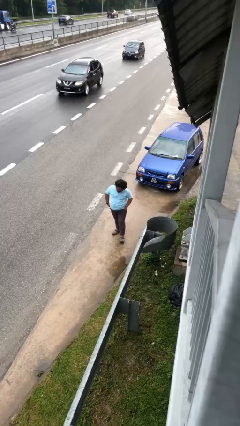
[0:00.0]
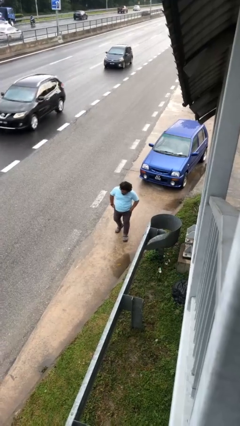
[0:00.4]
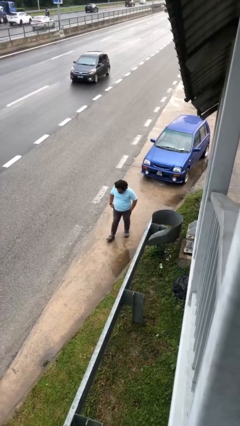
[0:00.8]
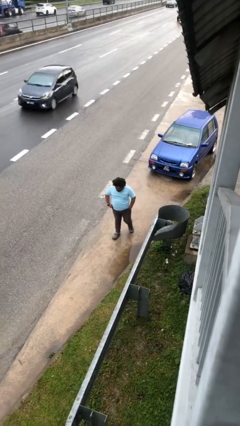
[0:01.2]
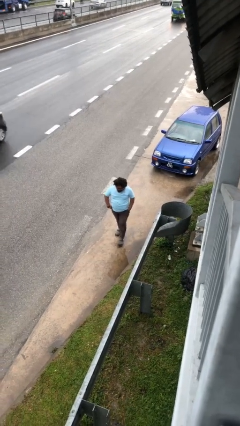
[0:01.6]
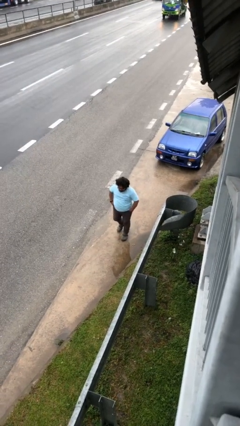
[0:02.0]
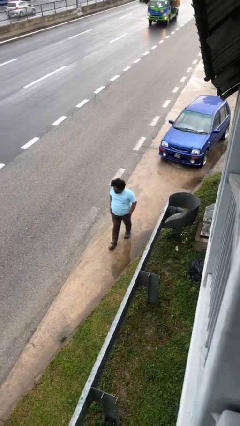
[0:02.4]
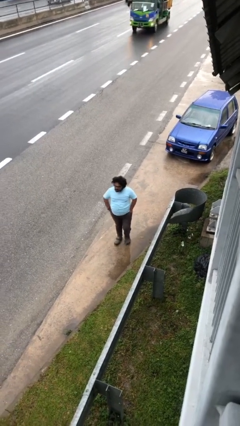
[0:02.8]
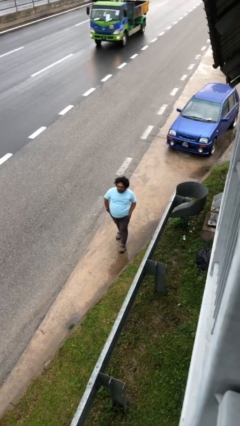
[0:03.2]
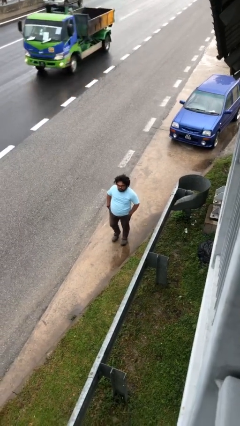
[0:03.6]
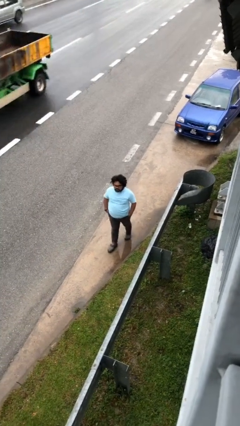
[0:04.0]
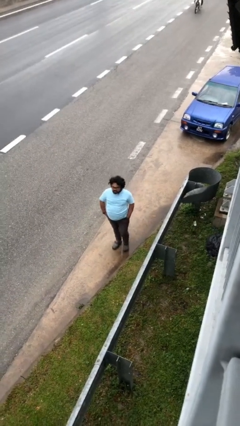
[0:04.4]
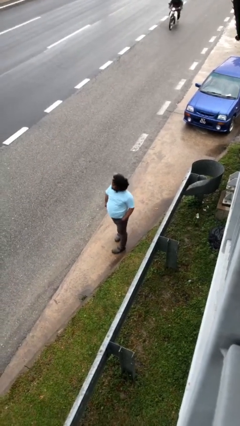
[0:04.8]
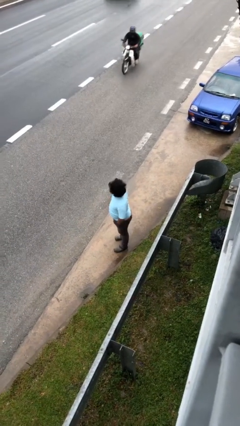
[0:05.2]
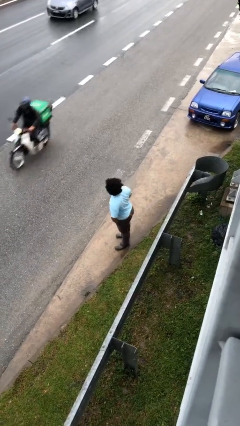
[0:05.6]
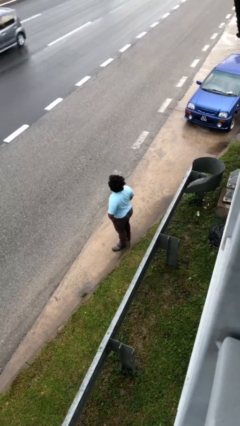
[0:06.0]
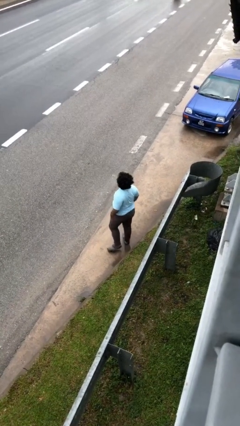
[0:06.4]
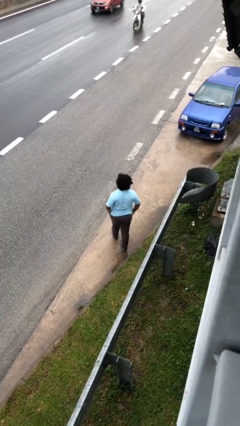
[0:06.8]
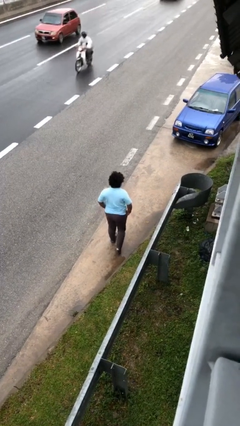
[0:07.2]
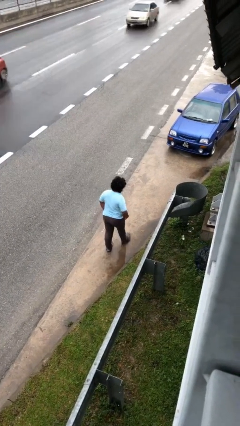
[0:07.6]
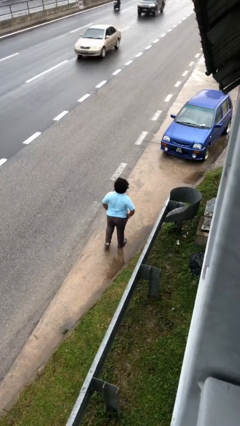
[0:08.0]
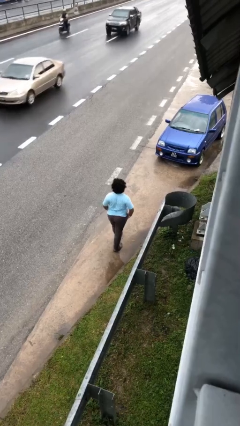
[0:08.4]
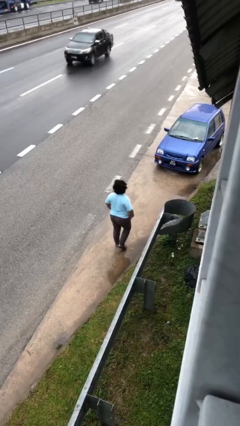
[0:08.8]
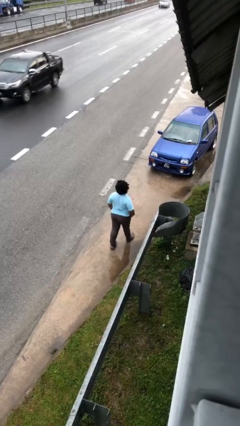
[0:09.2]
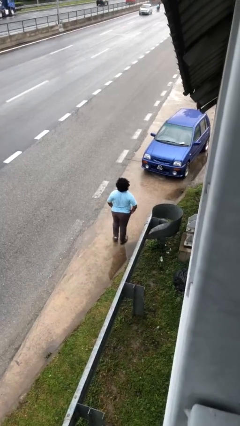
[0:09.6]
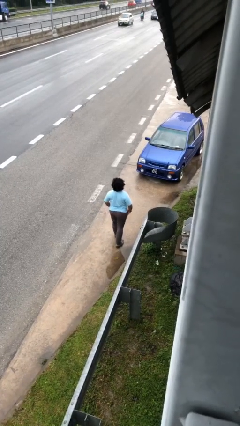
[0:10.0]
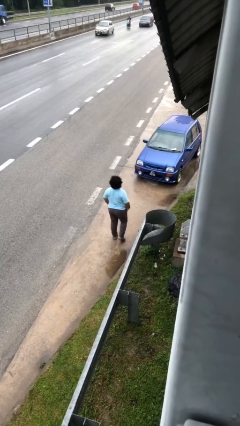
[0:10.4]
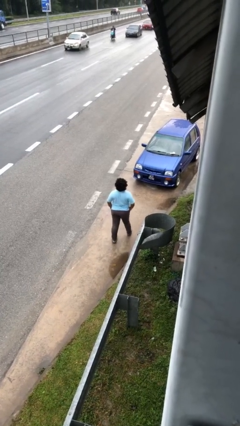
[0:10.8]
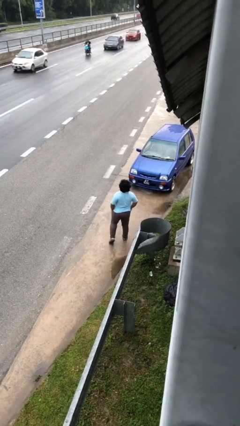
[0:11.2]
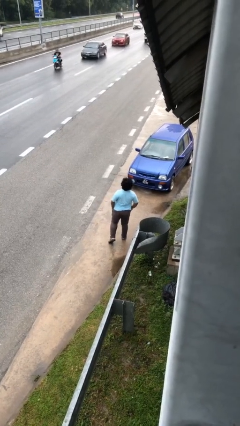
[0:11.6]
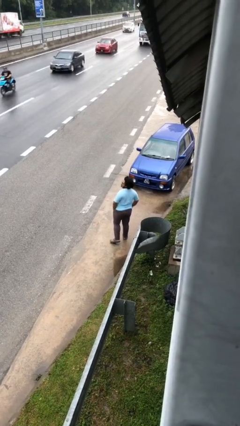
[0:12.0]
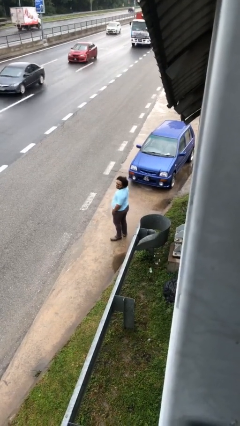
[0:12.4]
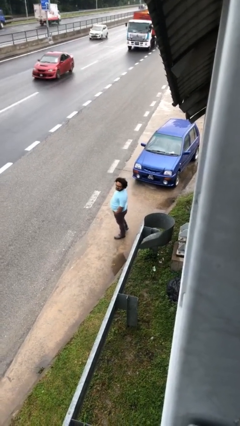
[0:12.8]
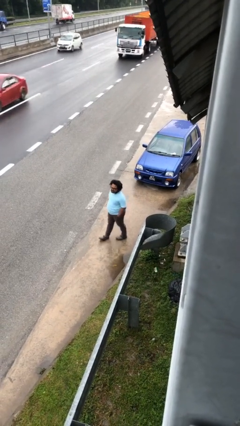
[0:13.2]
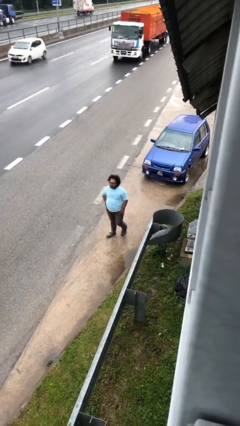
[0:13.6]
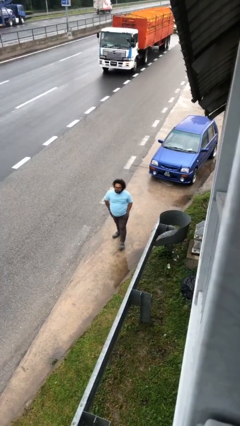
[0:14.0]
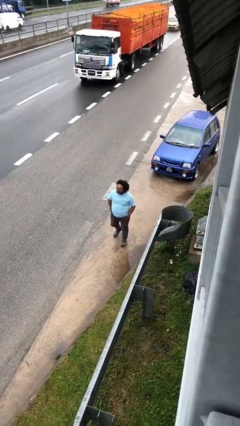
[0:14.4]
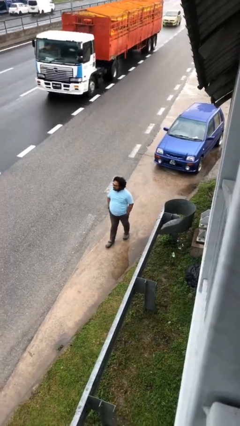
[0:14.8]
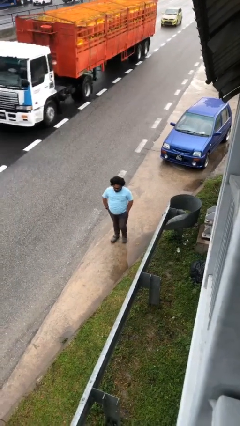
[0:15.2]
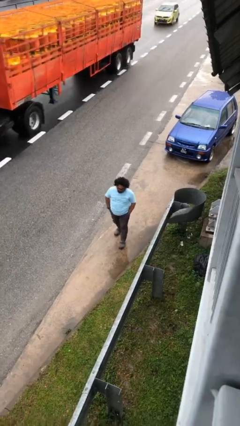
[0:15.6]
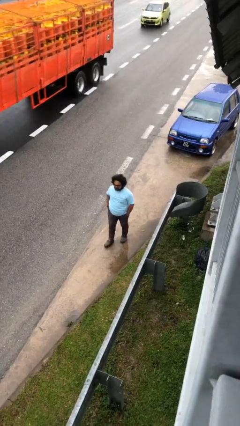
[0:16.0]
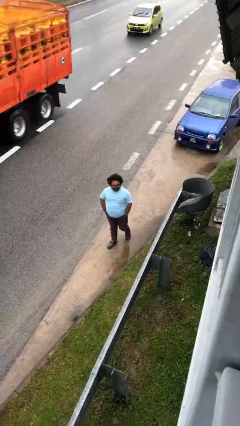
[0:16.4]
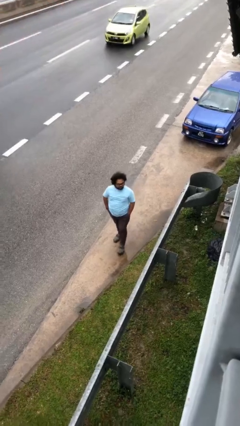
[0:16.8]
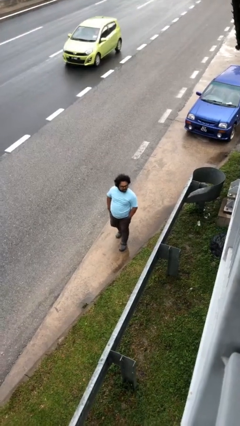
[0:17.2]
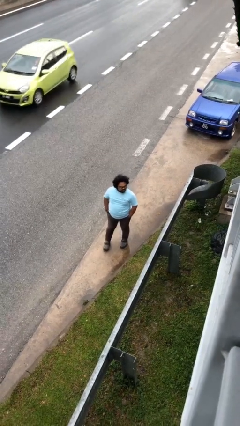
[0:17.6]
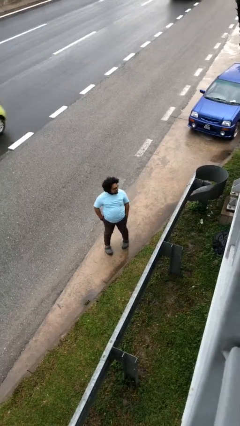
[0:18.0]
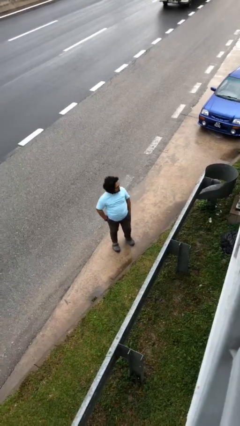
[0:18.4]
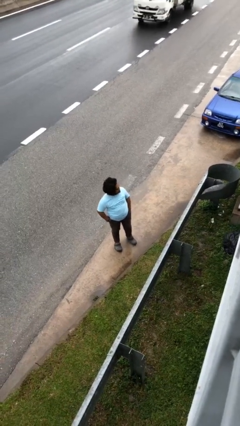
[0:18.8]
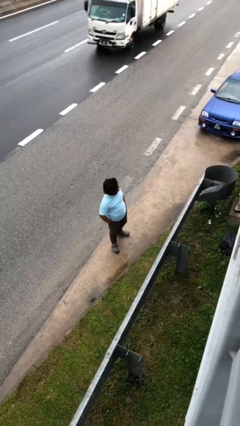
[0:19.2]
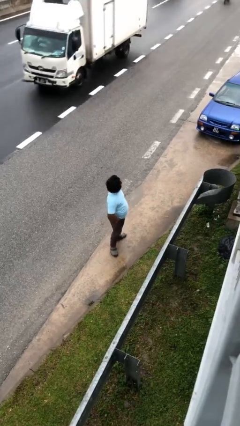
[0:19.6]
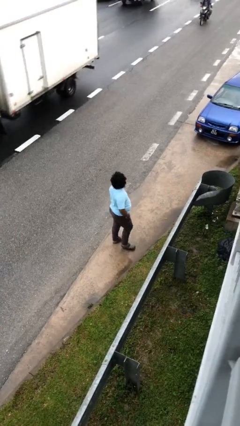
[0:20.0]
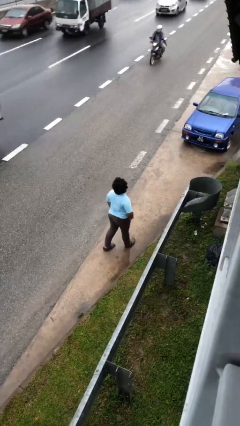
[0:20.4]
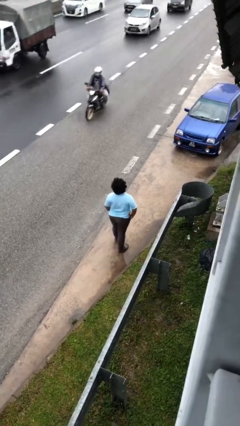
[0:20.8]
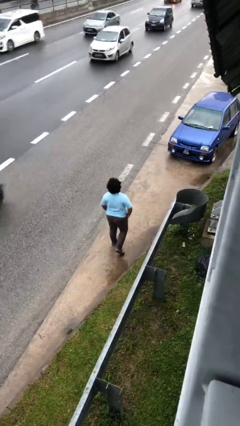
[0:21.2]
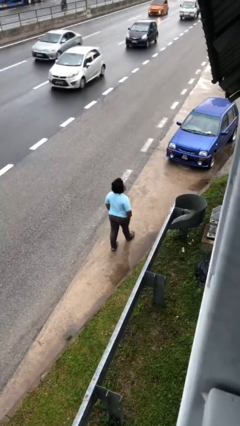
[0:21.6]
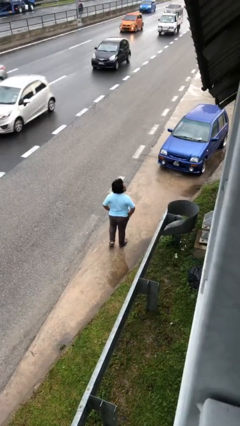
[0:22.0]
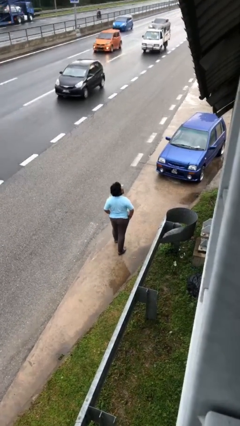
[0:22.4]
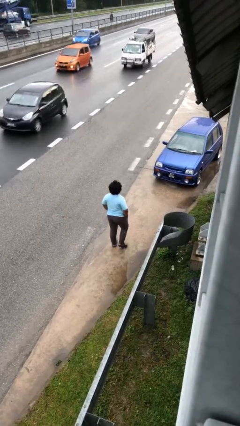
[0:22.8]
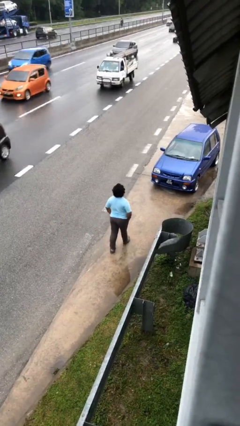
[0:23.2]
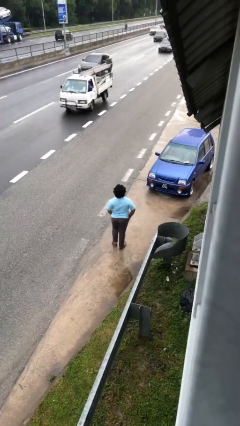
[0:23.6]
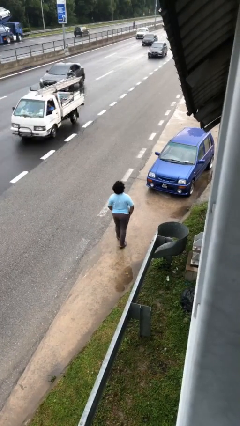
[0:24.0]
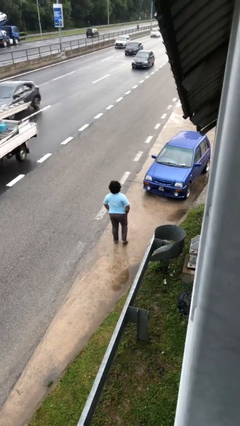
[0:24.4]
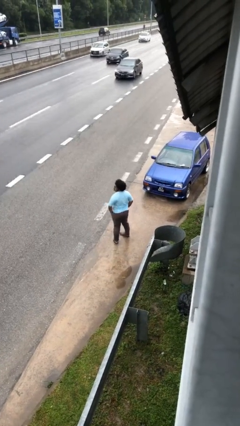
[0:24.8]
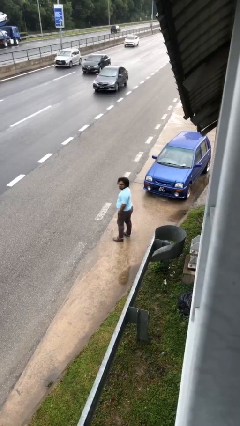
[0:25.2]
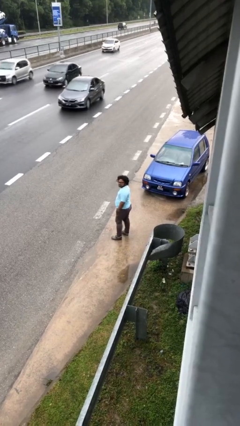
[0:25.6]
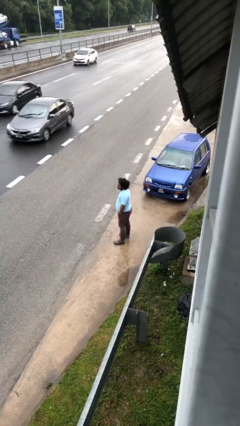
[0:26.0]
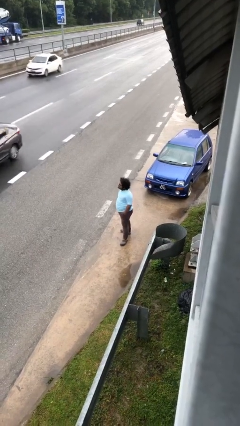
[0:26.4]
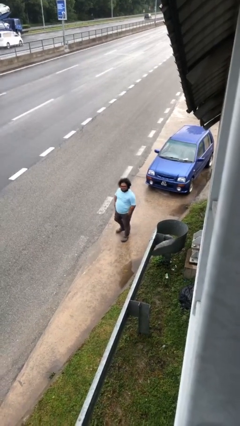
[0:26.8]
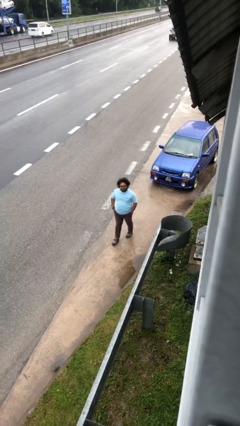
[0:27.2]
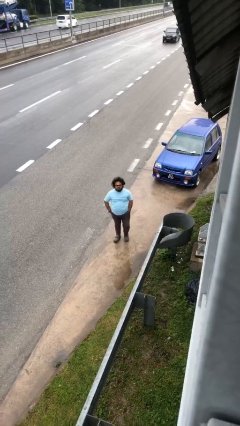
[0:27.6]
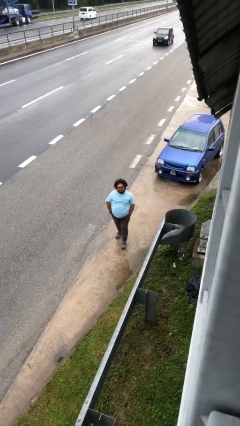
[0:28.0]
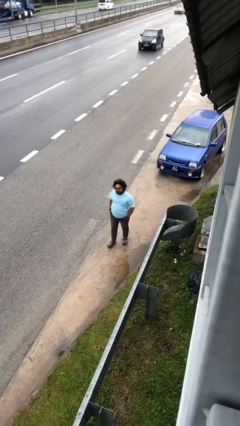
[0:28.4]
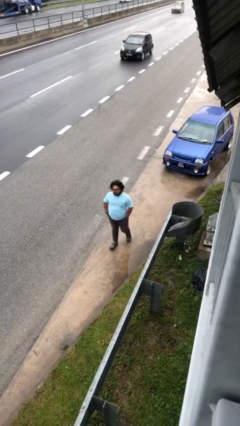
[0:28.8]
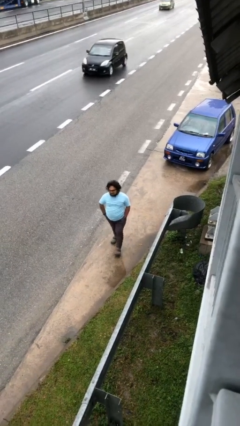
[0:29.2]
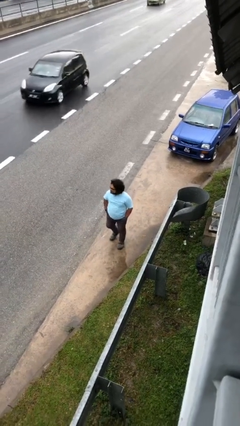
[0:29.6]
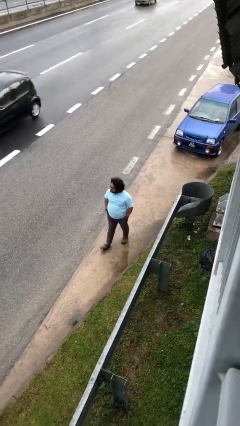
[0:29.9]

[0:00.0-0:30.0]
person walks

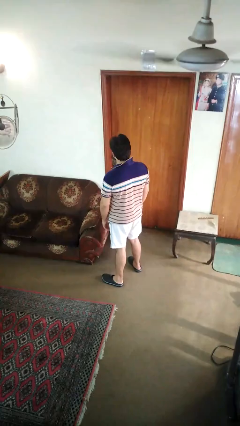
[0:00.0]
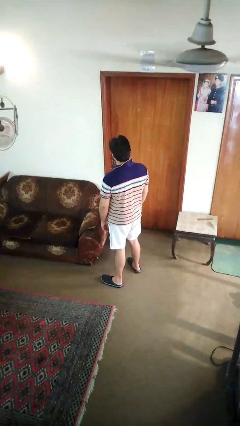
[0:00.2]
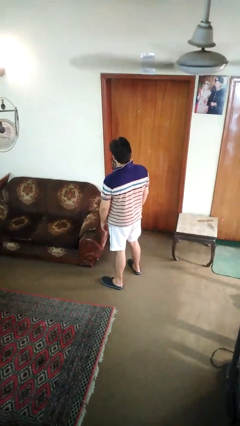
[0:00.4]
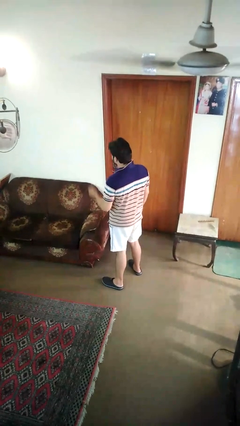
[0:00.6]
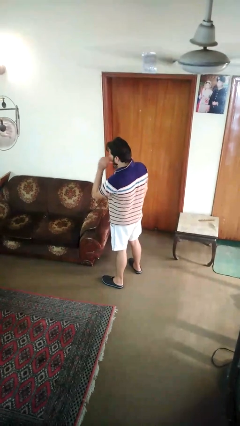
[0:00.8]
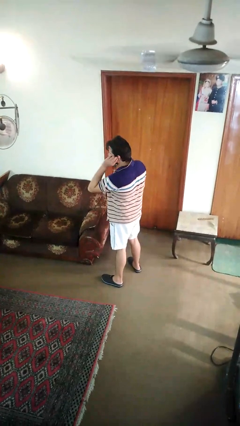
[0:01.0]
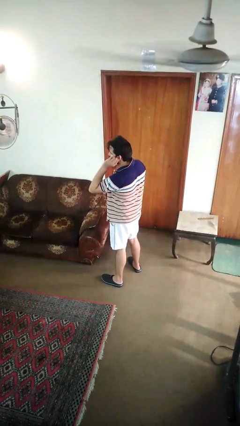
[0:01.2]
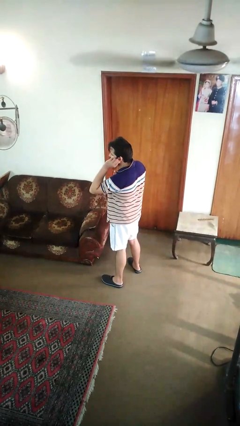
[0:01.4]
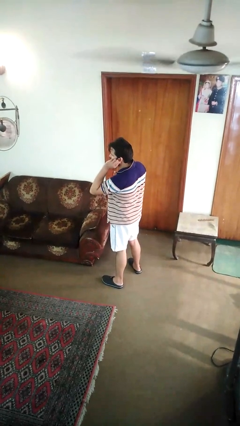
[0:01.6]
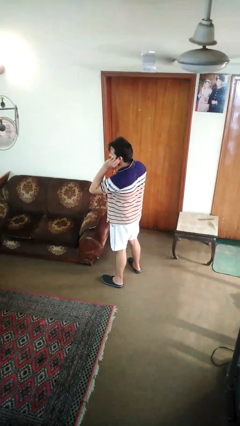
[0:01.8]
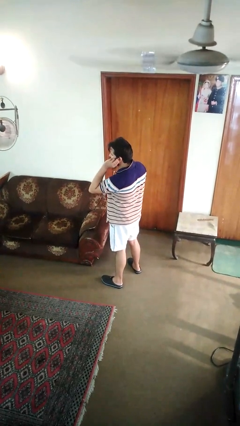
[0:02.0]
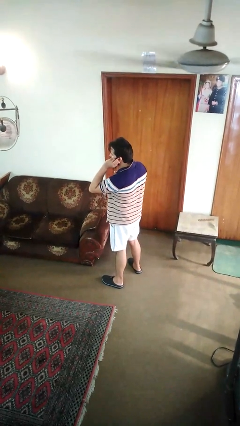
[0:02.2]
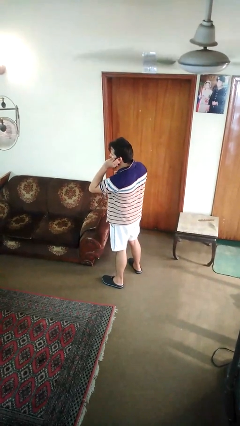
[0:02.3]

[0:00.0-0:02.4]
person touches earlobe

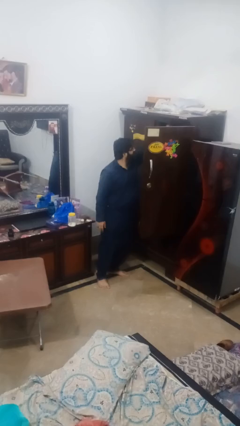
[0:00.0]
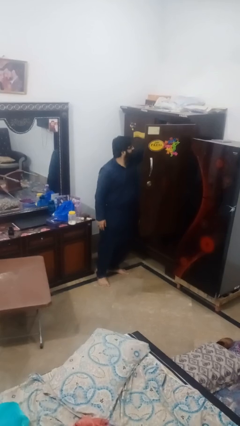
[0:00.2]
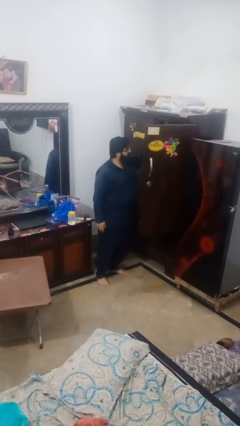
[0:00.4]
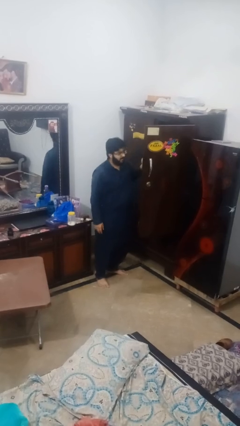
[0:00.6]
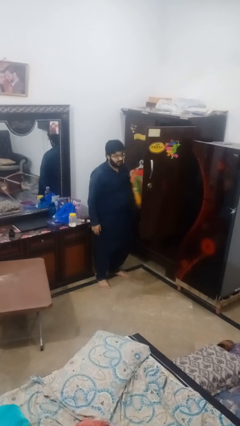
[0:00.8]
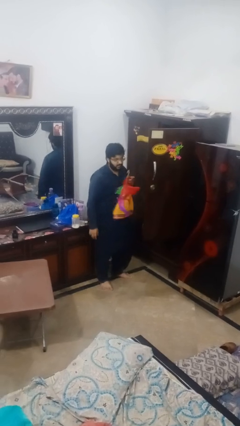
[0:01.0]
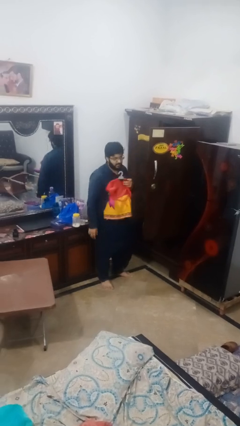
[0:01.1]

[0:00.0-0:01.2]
person takes clothes from closet
